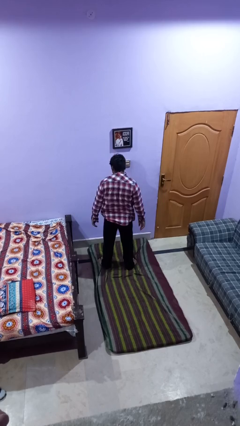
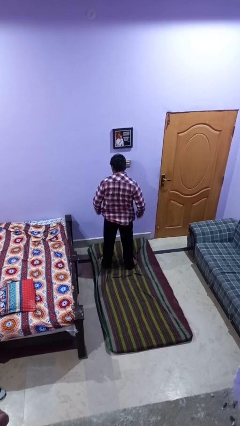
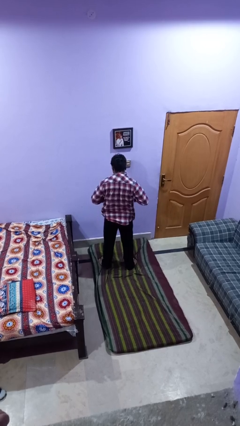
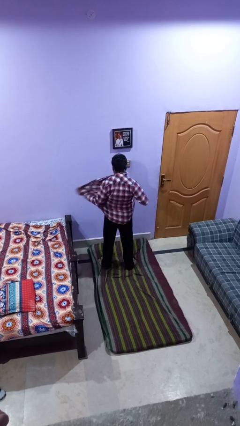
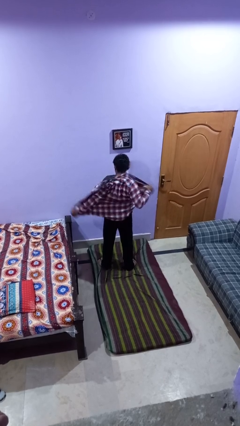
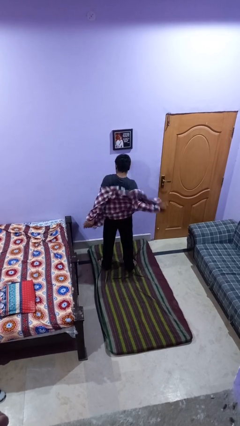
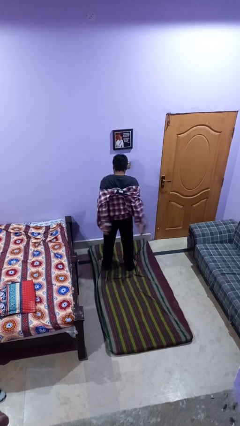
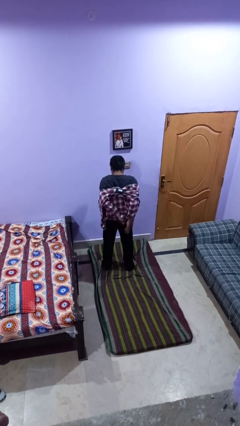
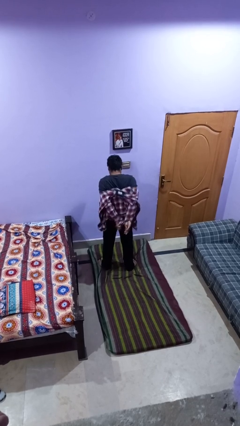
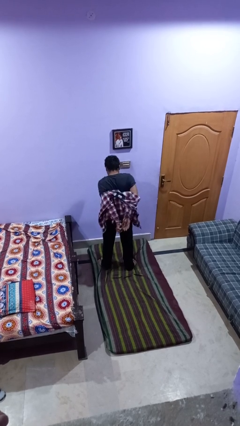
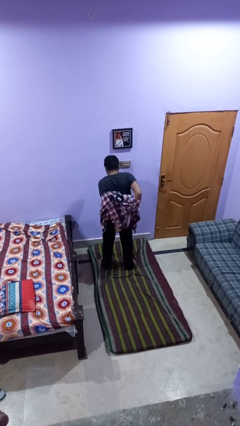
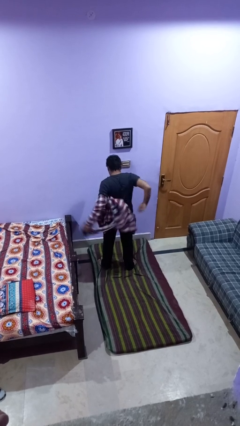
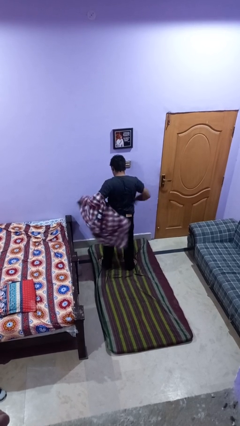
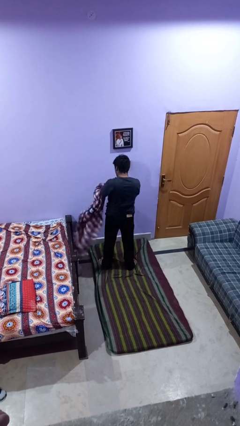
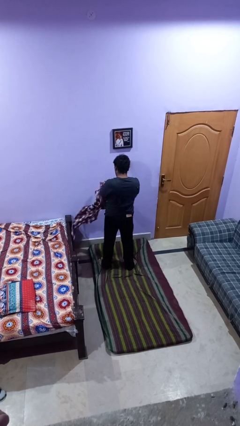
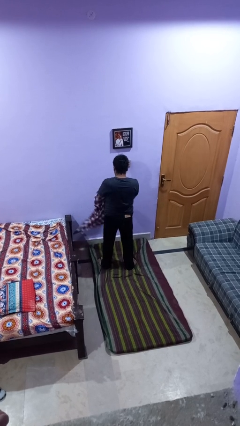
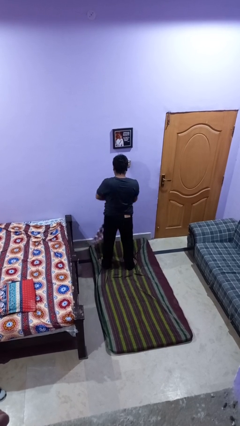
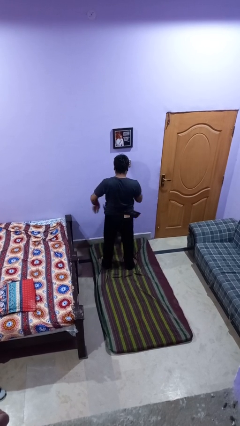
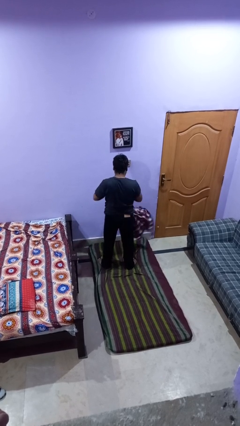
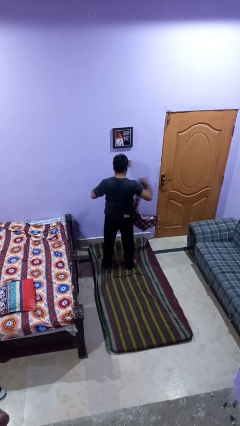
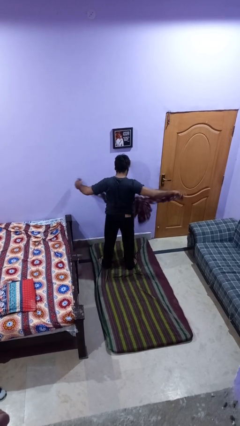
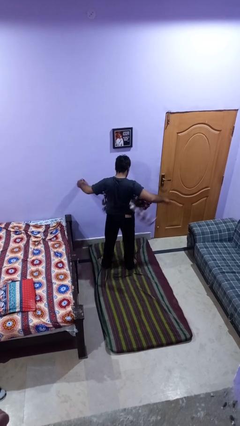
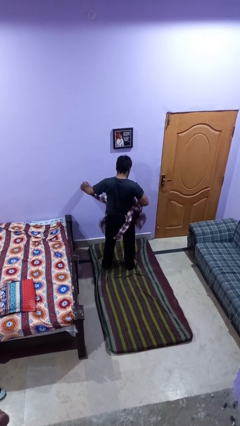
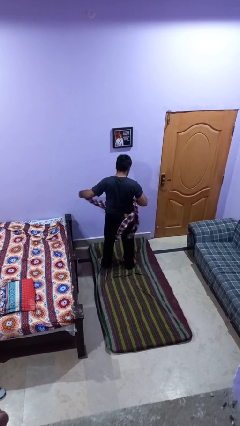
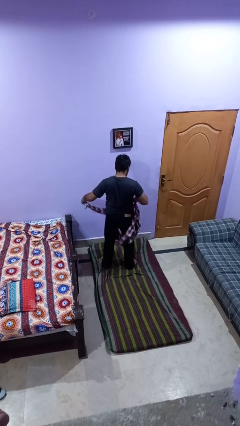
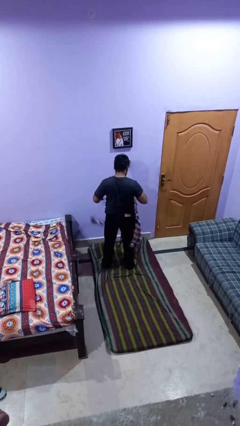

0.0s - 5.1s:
person takes off shirt

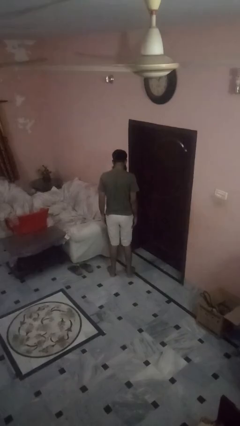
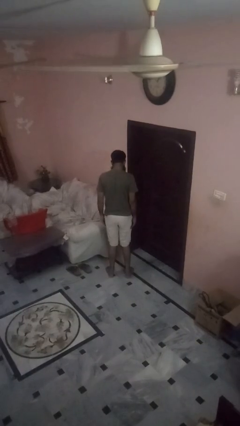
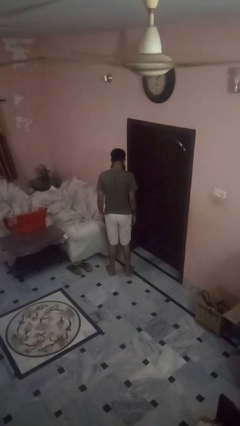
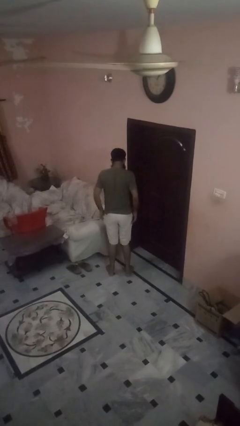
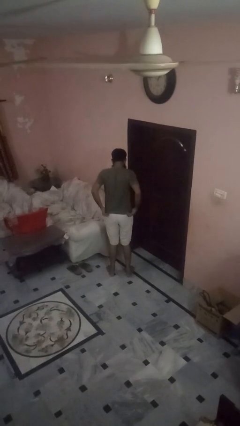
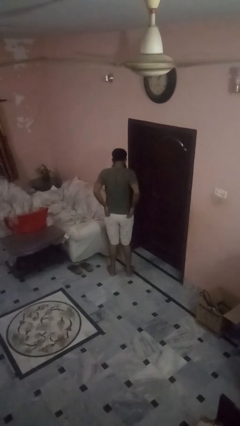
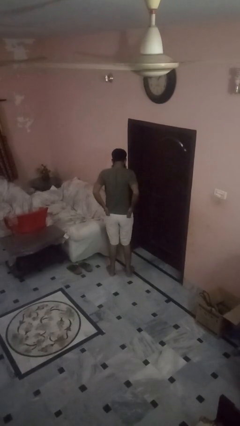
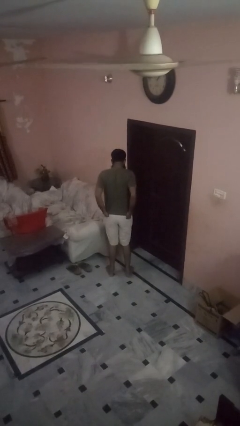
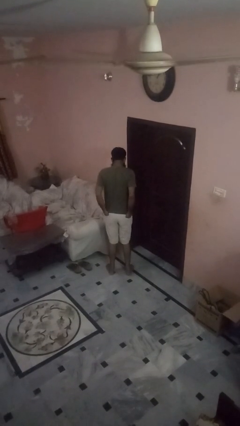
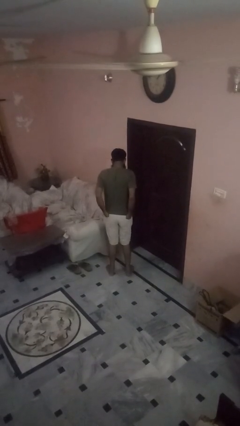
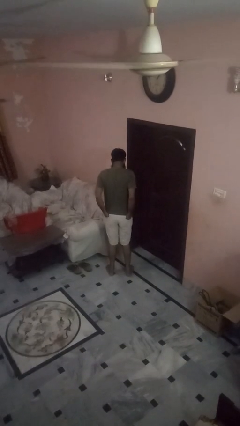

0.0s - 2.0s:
person puts hands in back pockets

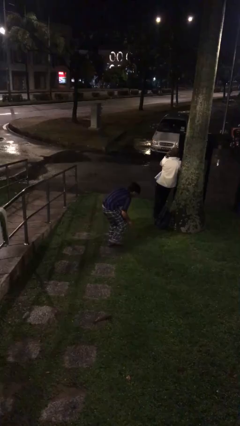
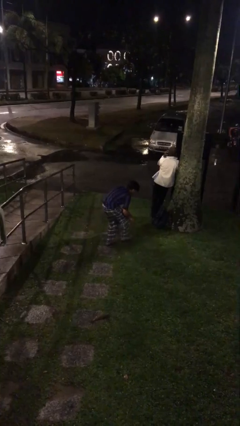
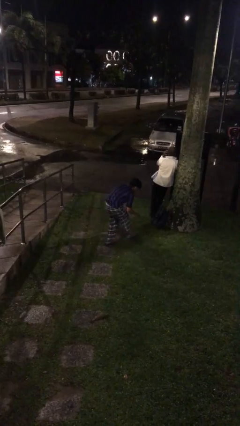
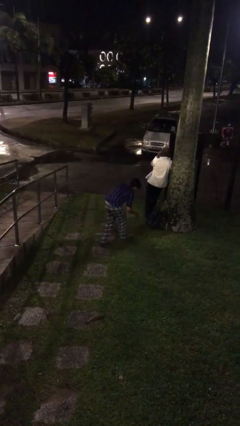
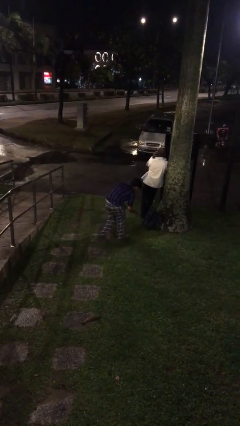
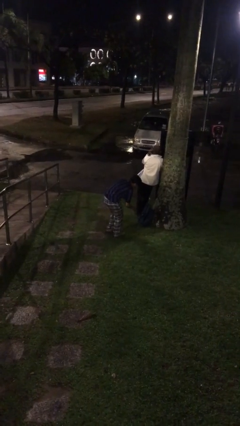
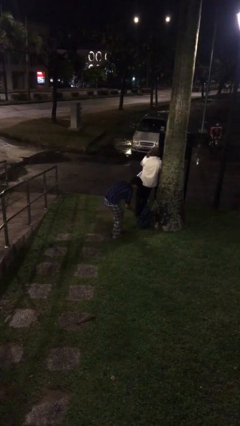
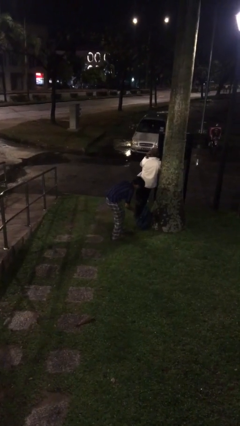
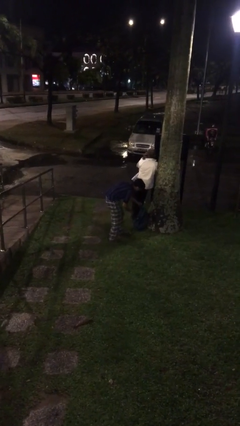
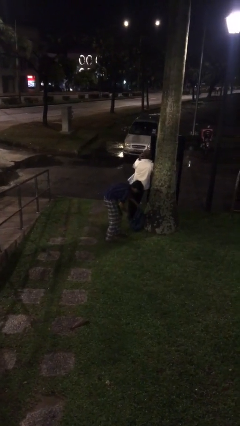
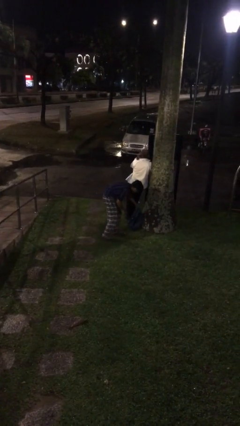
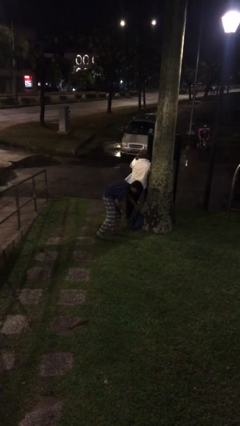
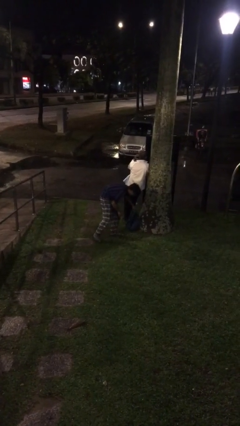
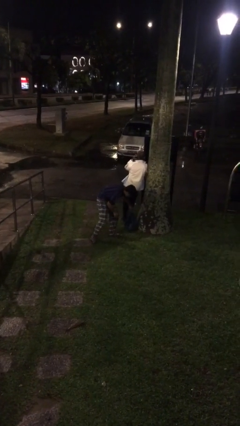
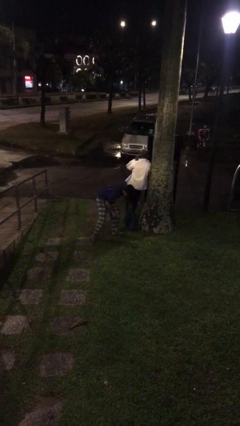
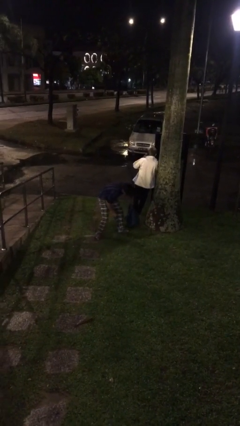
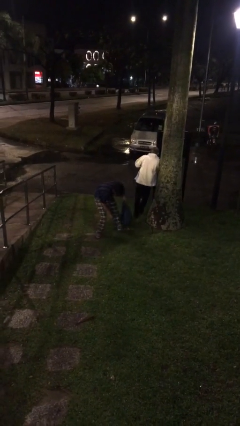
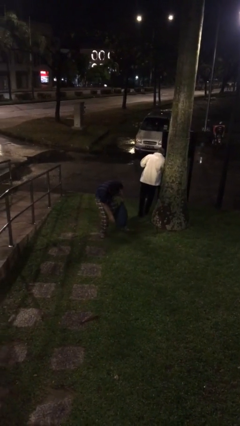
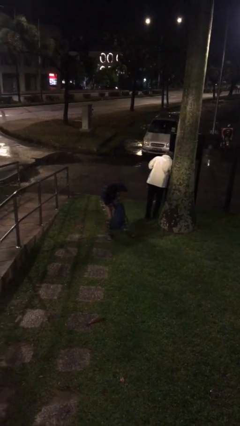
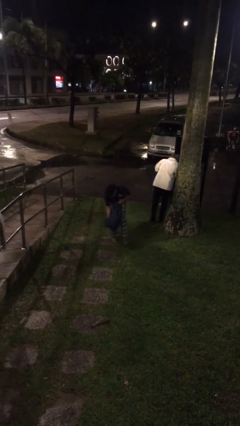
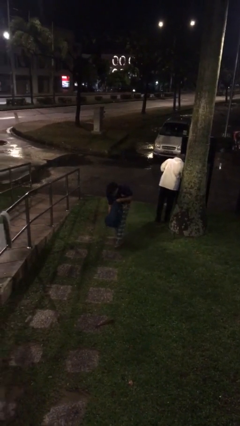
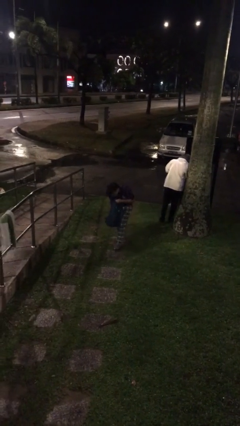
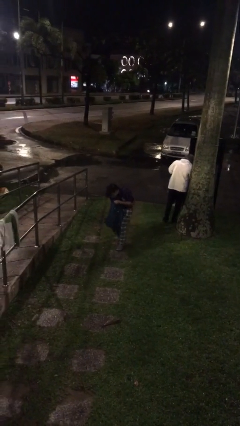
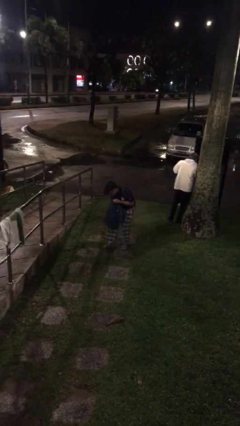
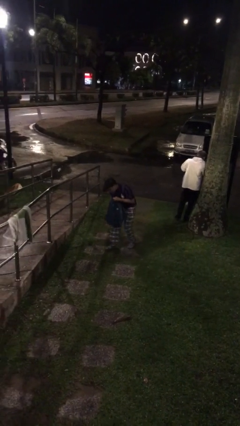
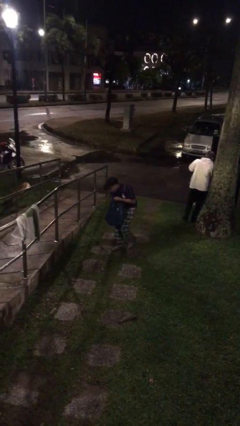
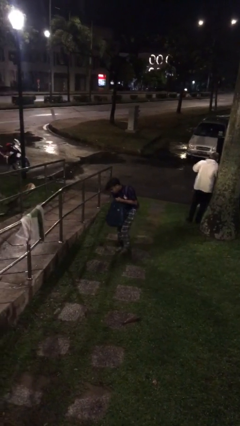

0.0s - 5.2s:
person steals object from person

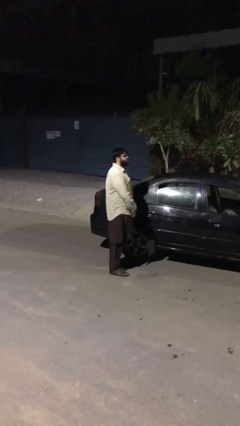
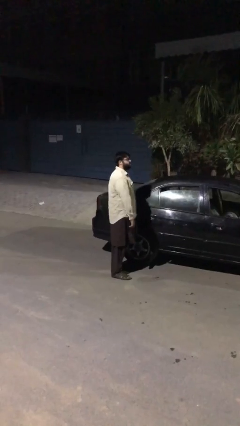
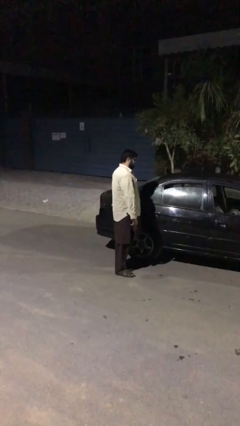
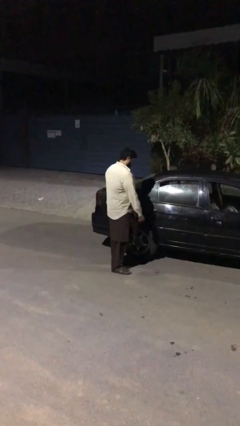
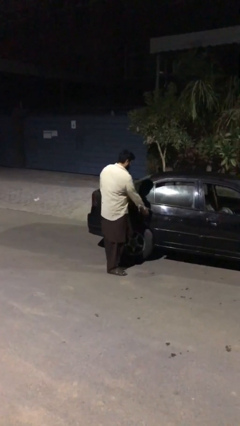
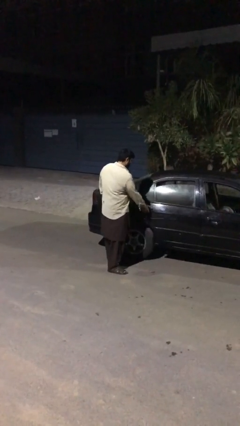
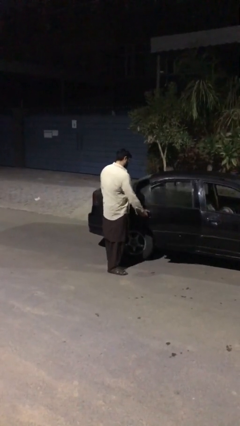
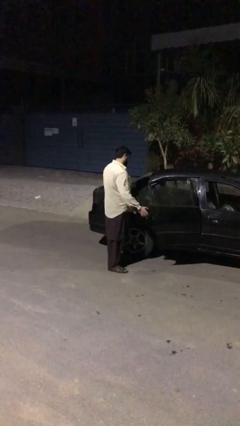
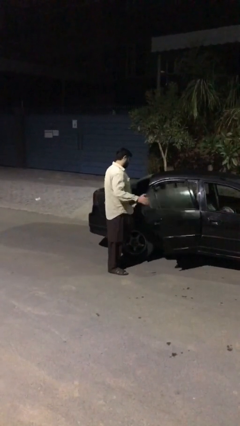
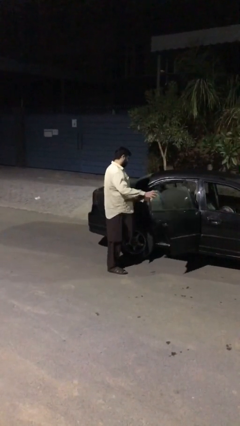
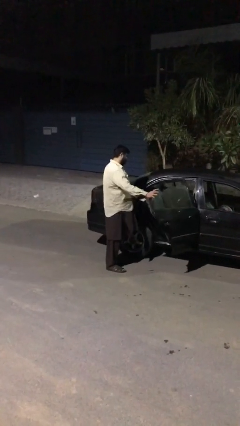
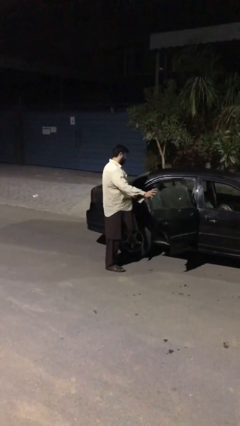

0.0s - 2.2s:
person opens car door

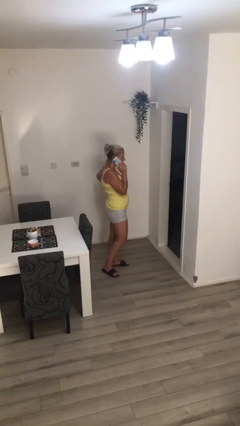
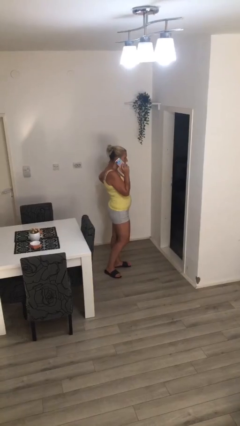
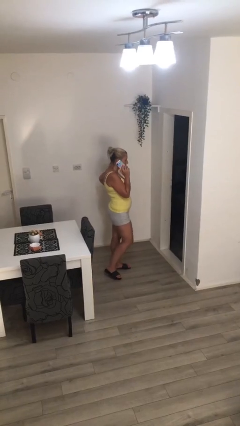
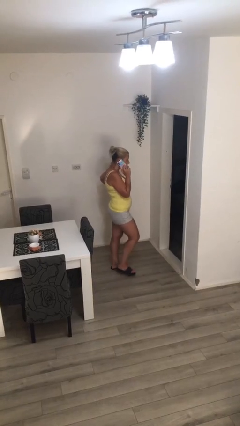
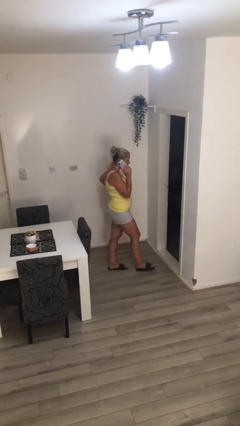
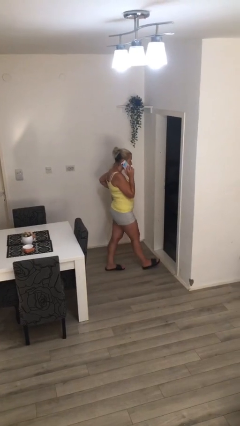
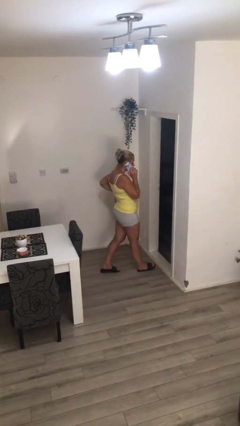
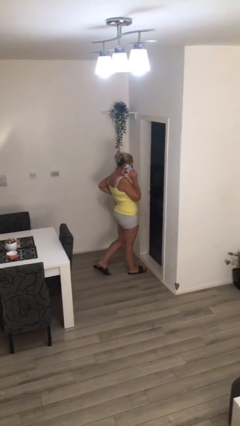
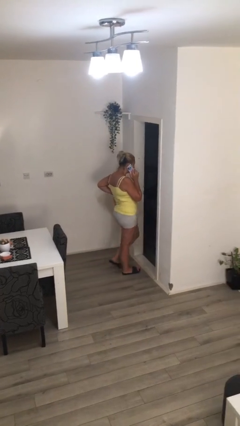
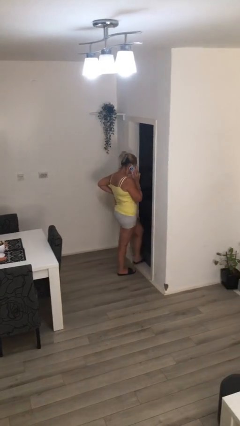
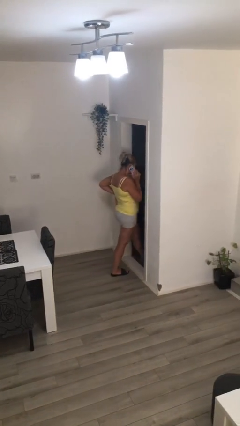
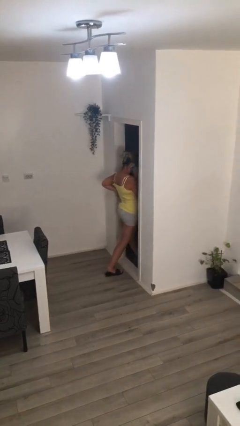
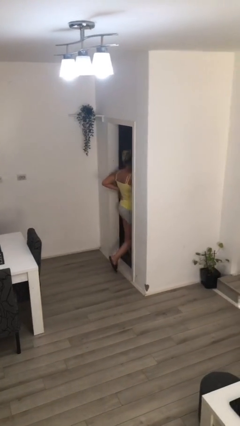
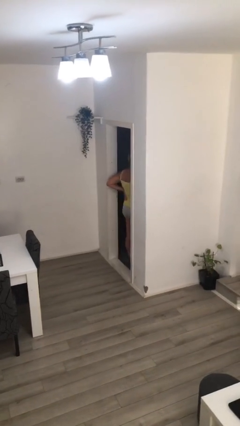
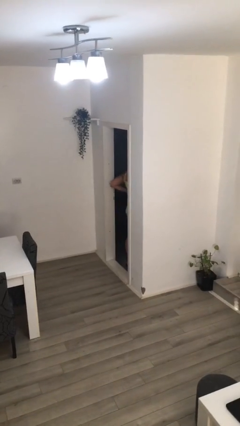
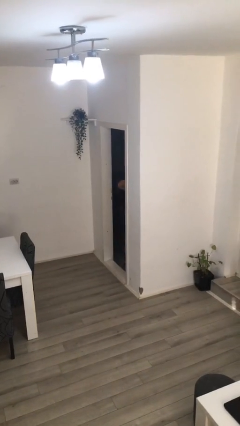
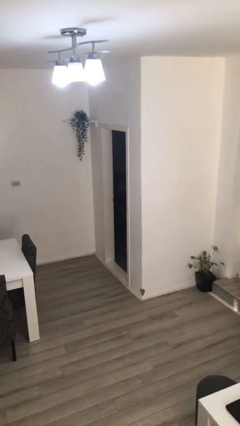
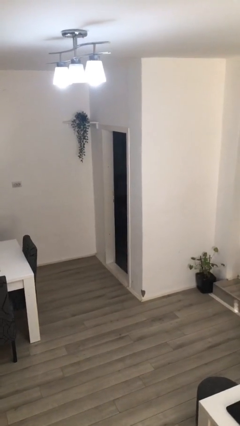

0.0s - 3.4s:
person exits scene through structure
